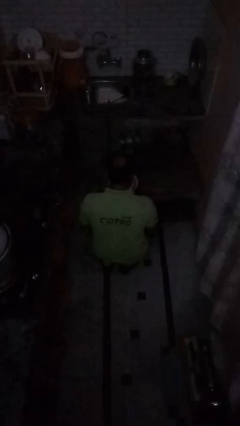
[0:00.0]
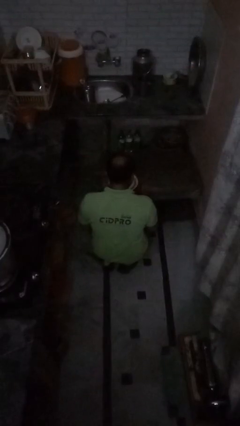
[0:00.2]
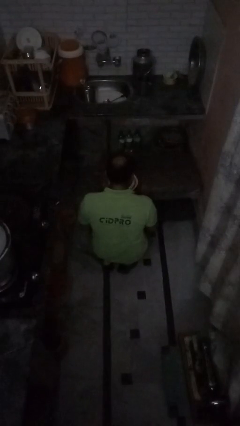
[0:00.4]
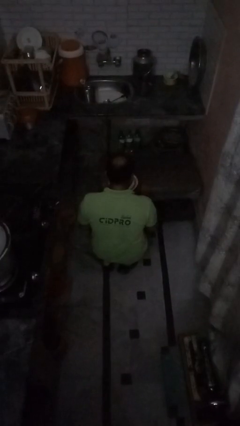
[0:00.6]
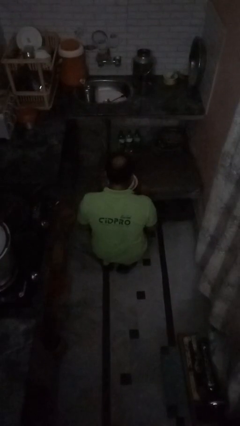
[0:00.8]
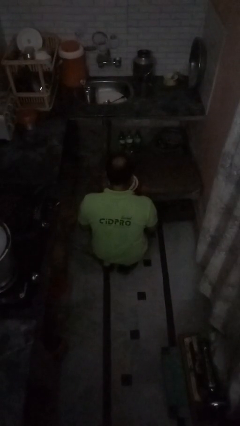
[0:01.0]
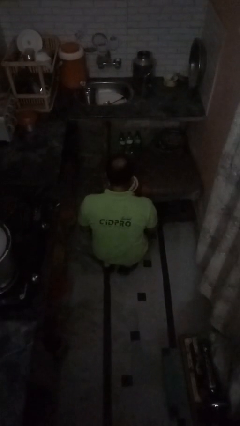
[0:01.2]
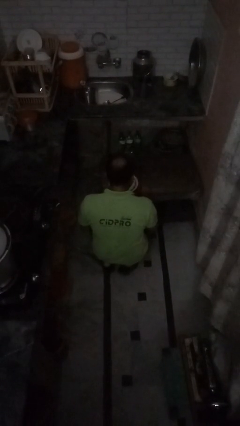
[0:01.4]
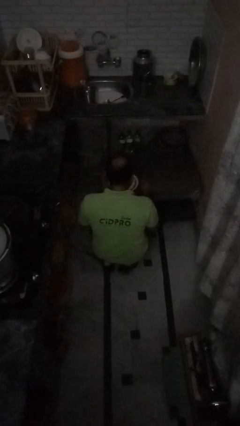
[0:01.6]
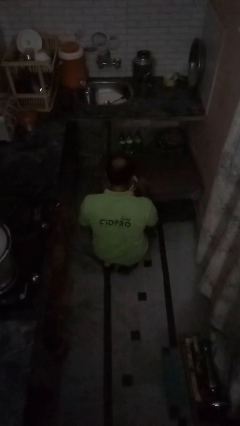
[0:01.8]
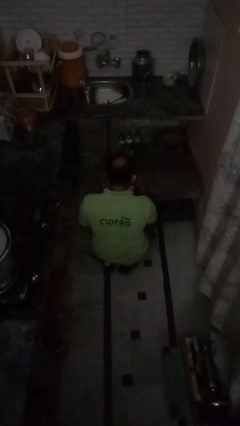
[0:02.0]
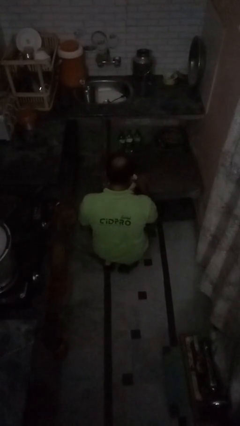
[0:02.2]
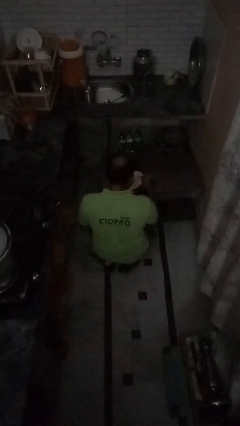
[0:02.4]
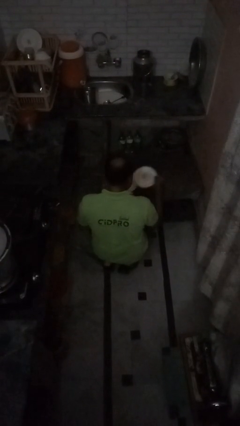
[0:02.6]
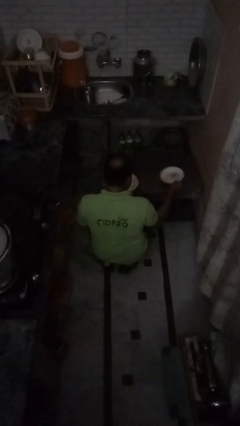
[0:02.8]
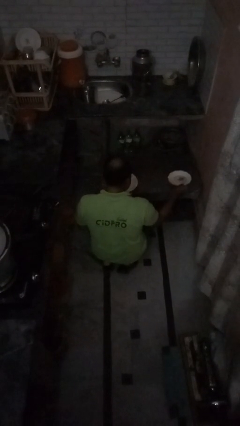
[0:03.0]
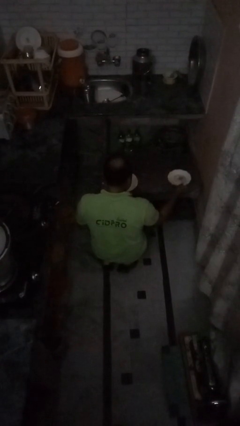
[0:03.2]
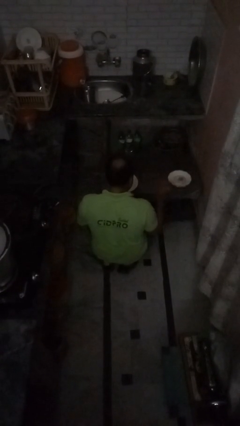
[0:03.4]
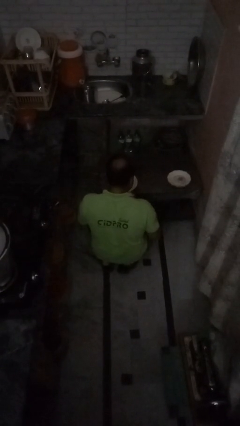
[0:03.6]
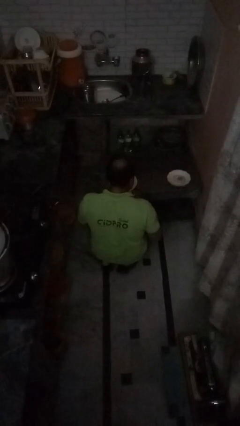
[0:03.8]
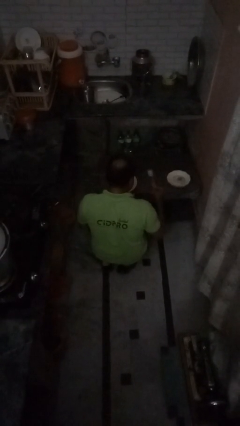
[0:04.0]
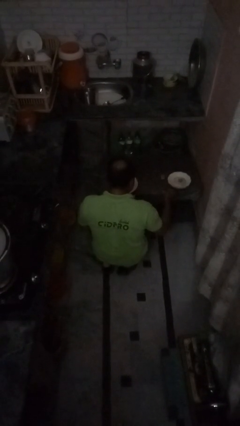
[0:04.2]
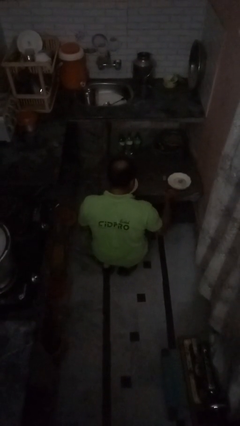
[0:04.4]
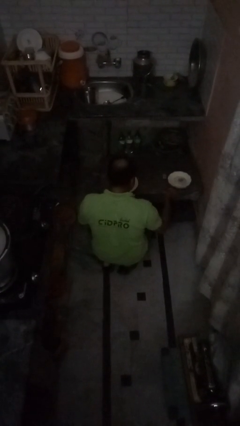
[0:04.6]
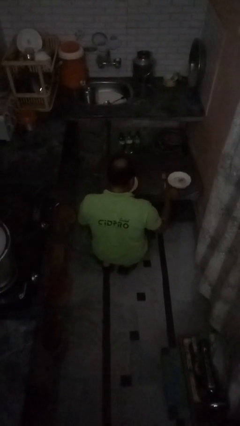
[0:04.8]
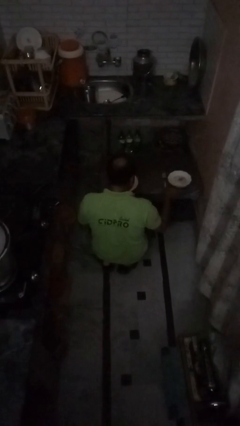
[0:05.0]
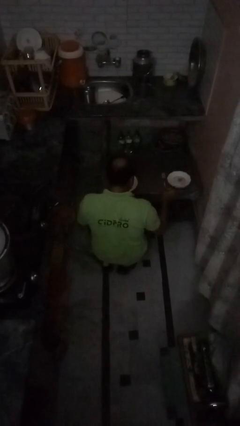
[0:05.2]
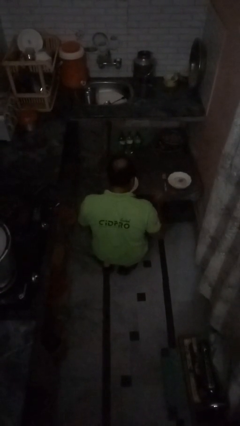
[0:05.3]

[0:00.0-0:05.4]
person sets table

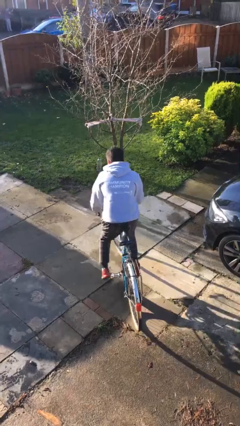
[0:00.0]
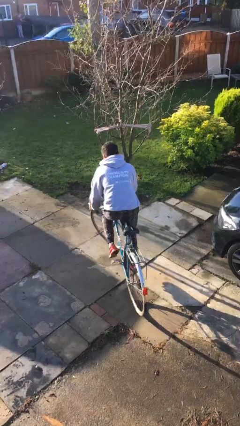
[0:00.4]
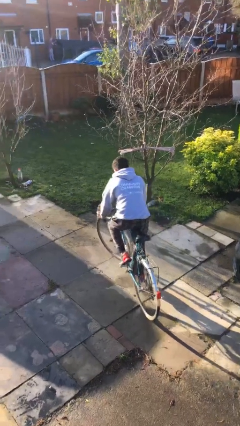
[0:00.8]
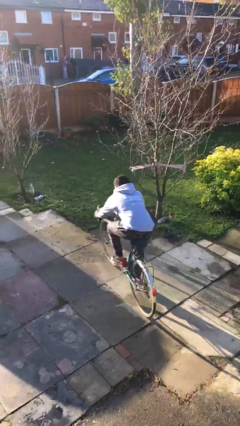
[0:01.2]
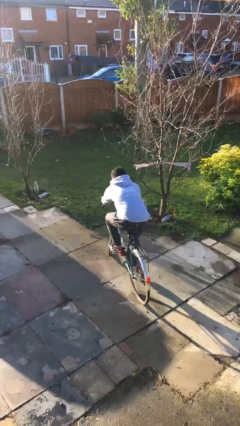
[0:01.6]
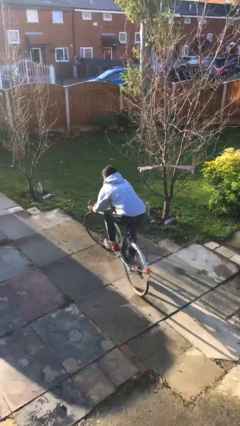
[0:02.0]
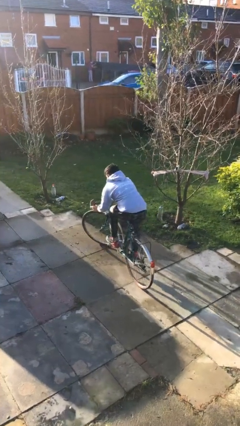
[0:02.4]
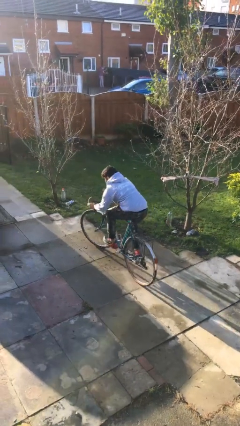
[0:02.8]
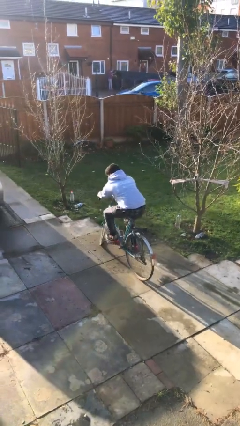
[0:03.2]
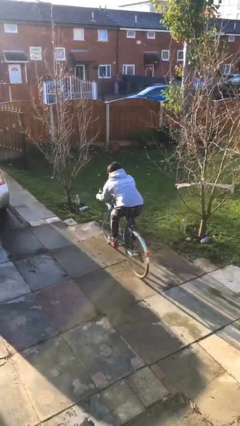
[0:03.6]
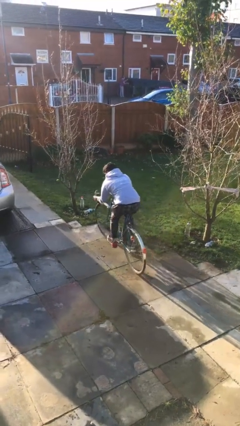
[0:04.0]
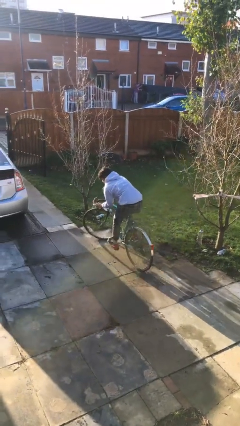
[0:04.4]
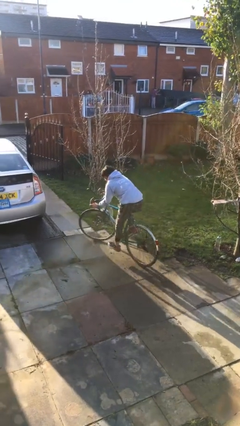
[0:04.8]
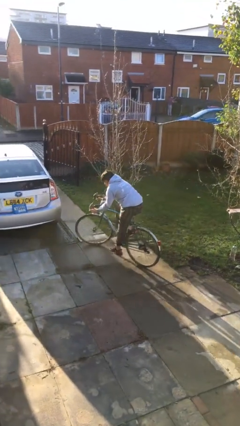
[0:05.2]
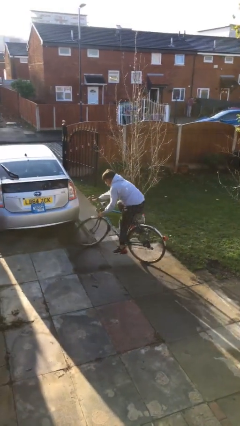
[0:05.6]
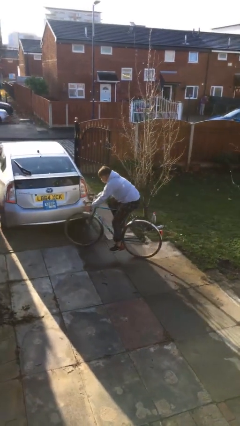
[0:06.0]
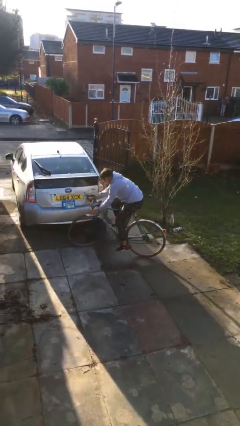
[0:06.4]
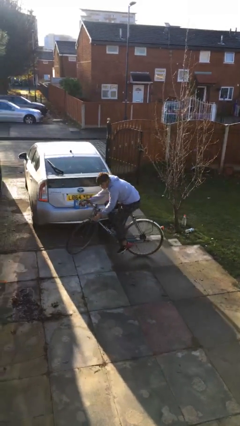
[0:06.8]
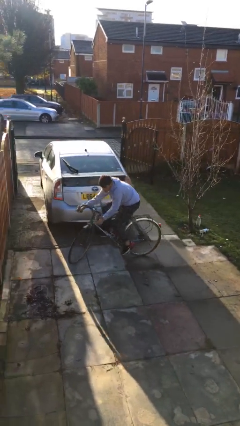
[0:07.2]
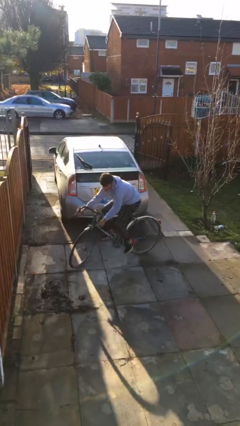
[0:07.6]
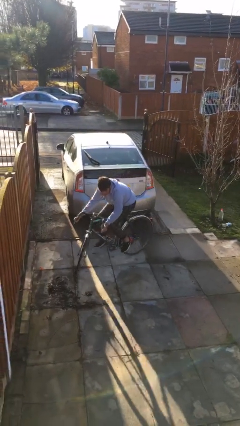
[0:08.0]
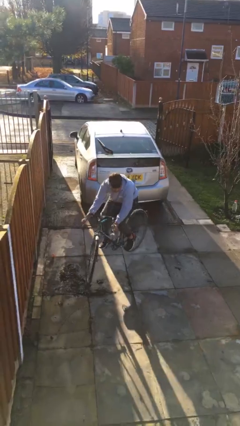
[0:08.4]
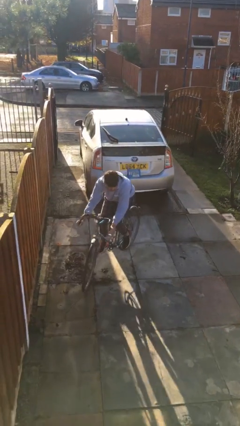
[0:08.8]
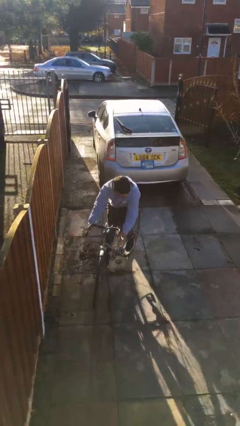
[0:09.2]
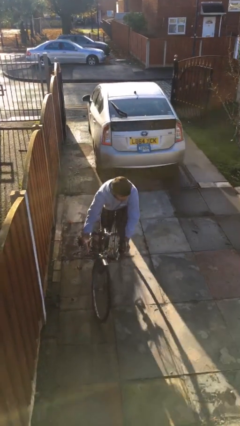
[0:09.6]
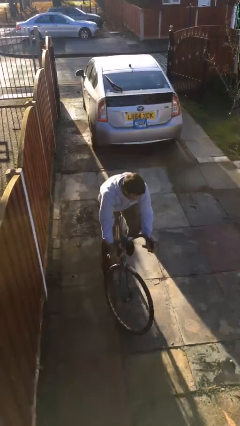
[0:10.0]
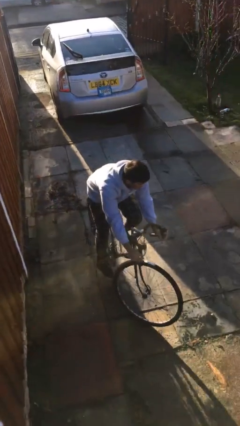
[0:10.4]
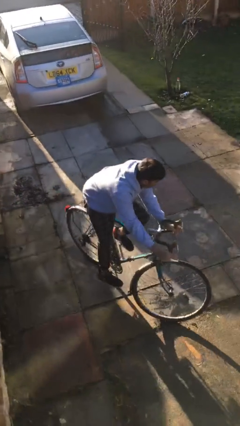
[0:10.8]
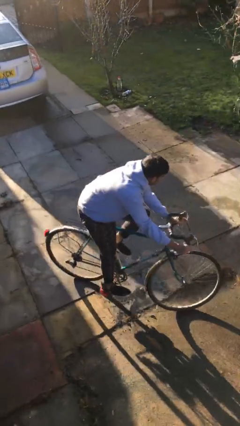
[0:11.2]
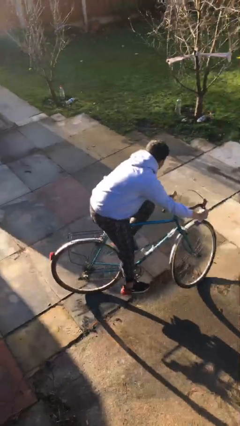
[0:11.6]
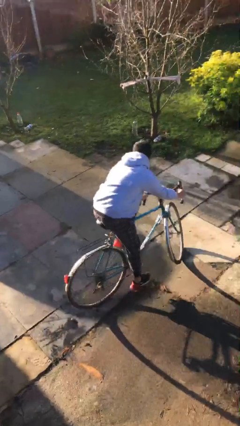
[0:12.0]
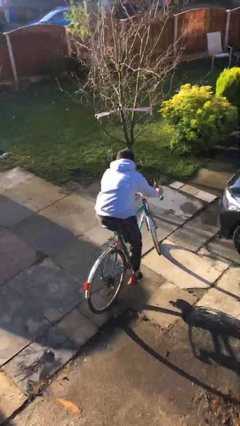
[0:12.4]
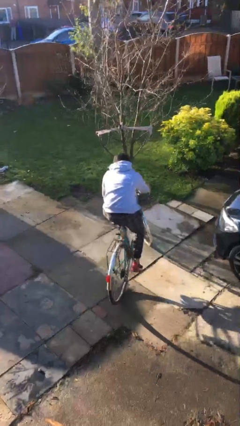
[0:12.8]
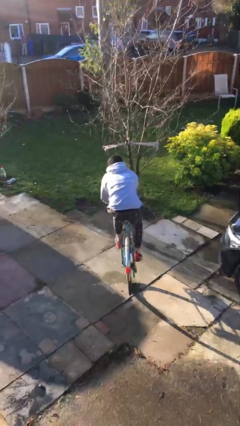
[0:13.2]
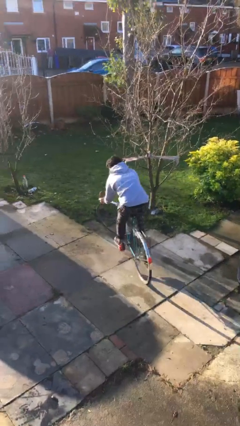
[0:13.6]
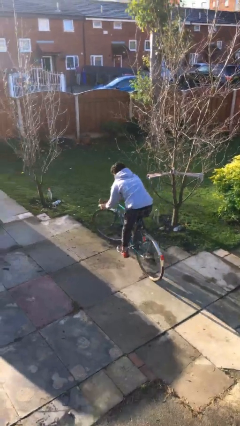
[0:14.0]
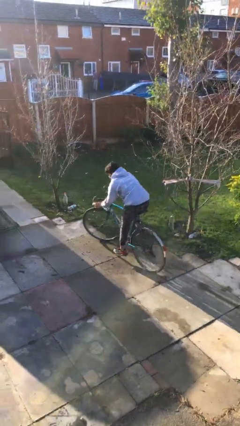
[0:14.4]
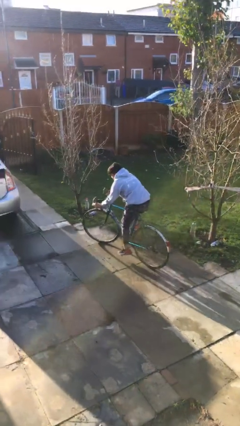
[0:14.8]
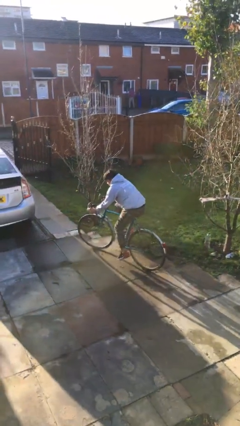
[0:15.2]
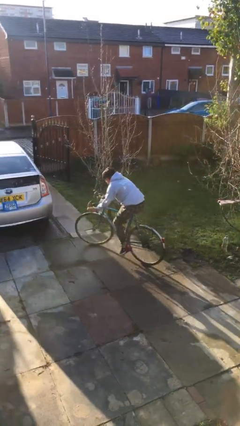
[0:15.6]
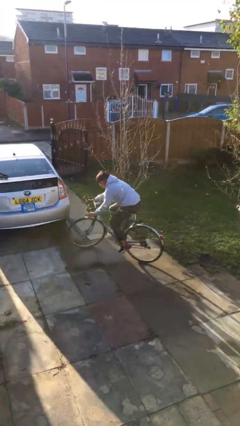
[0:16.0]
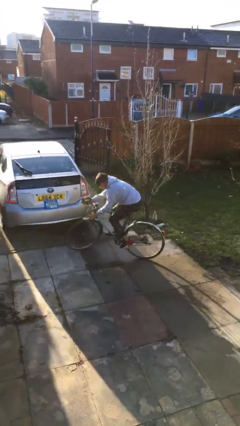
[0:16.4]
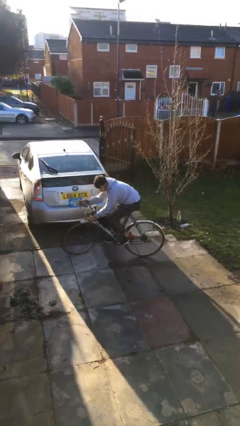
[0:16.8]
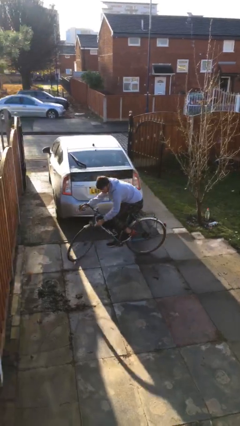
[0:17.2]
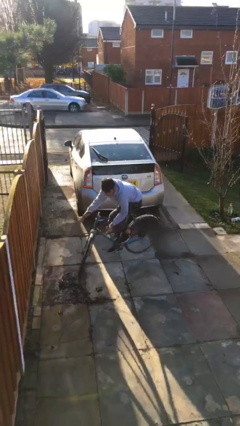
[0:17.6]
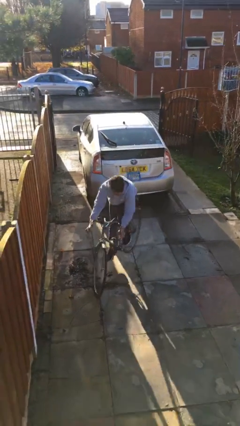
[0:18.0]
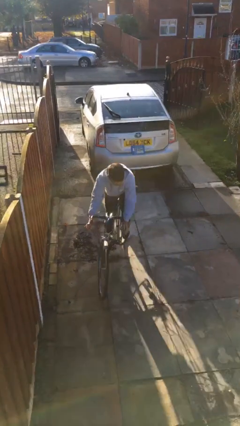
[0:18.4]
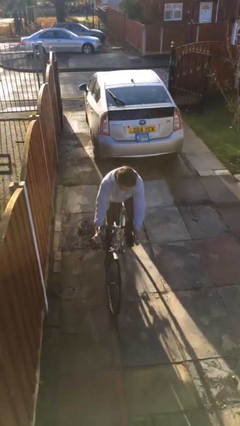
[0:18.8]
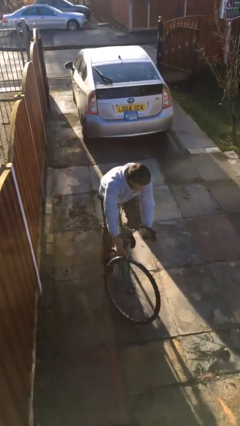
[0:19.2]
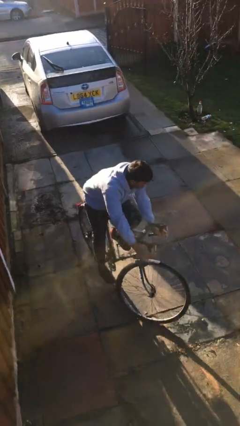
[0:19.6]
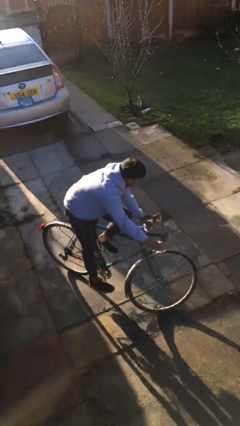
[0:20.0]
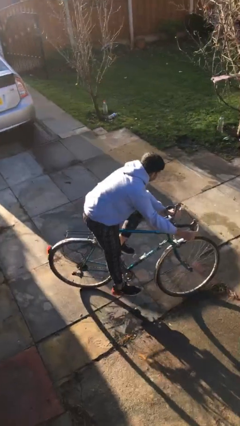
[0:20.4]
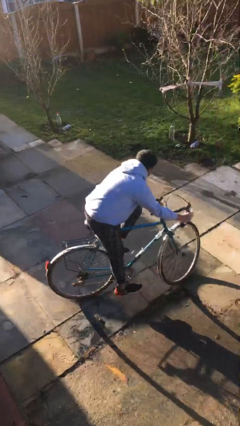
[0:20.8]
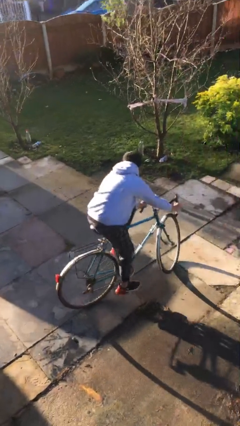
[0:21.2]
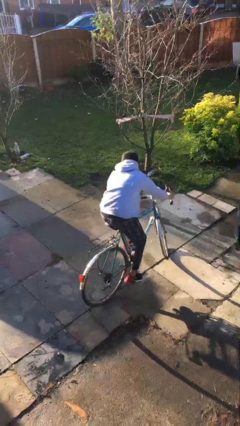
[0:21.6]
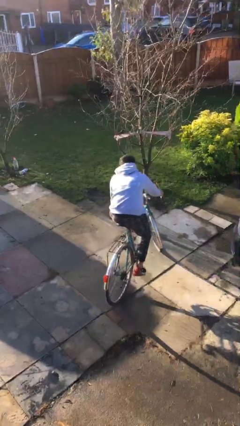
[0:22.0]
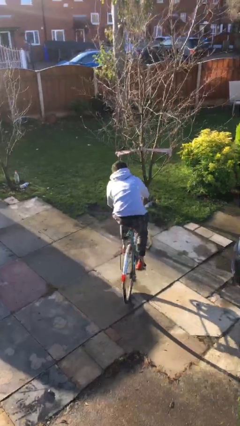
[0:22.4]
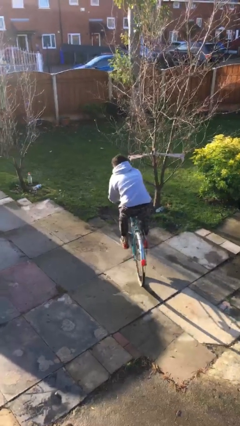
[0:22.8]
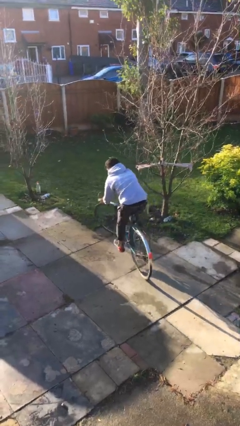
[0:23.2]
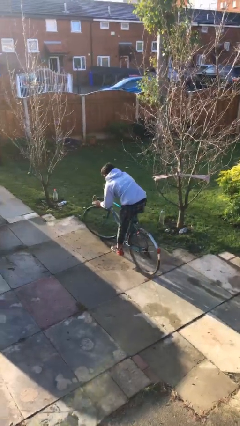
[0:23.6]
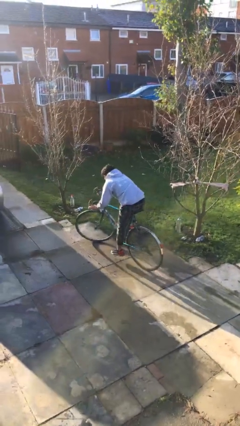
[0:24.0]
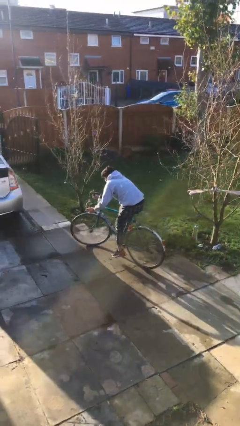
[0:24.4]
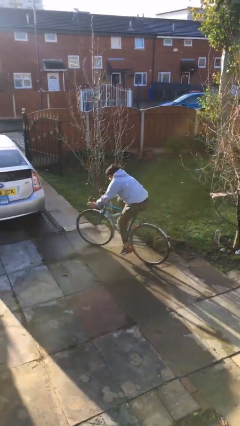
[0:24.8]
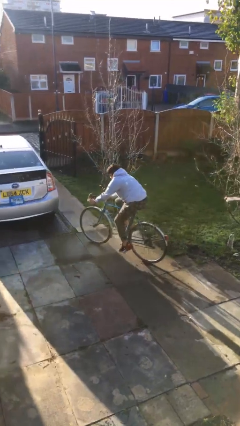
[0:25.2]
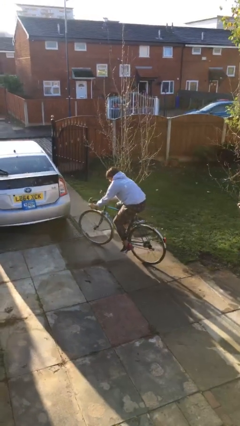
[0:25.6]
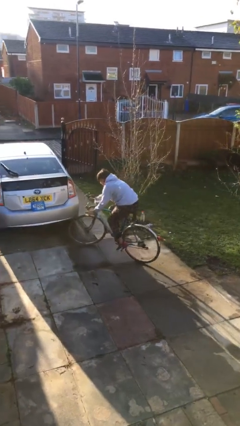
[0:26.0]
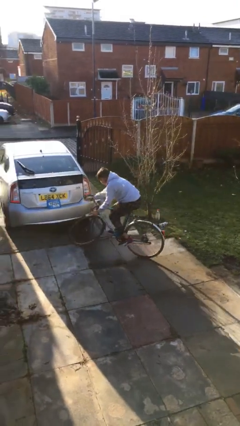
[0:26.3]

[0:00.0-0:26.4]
person rides bicycle
